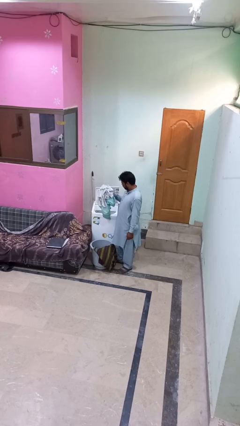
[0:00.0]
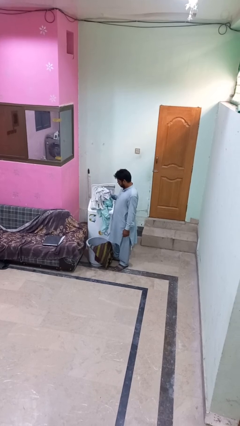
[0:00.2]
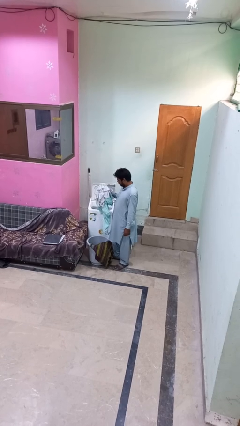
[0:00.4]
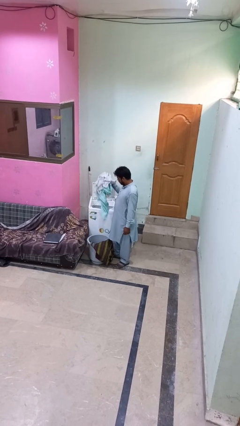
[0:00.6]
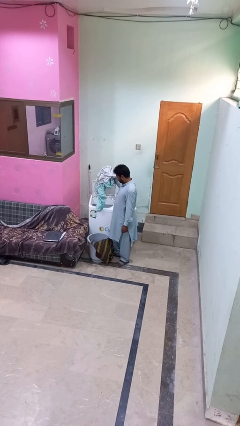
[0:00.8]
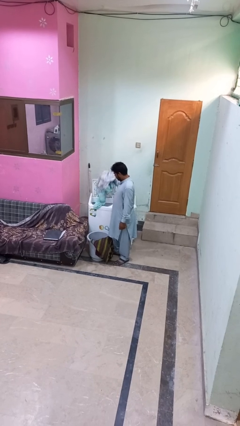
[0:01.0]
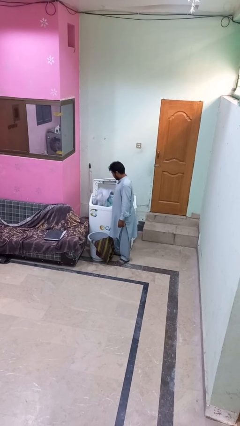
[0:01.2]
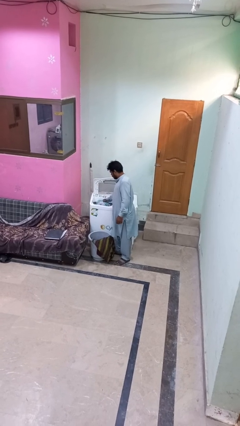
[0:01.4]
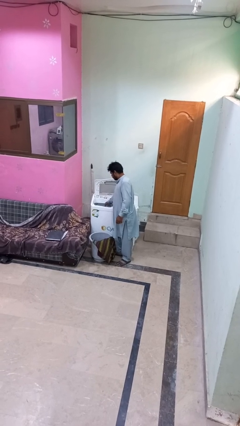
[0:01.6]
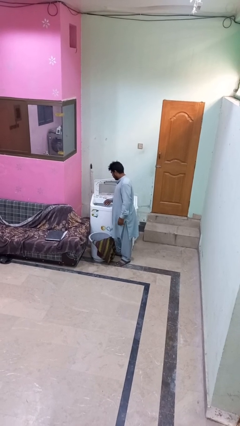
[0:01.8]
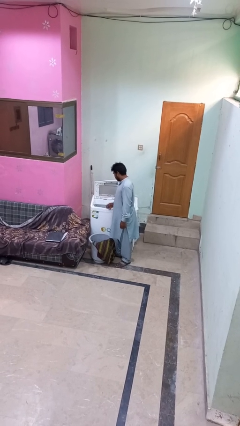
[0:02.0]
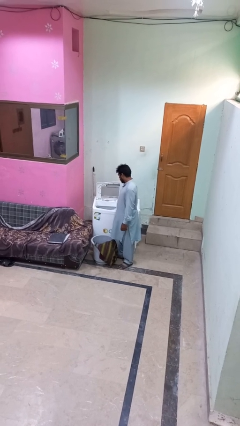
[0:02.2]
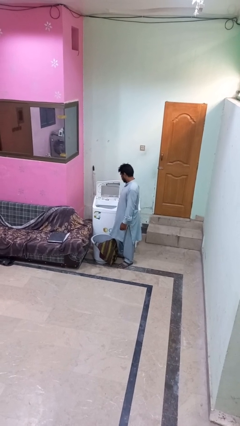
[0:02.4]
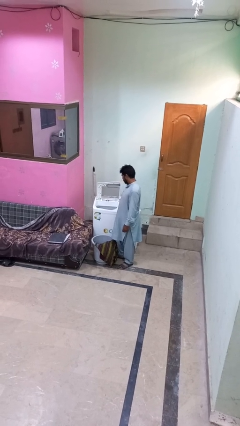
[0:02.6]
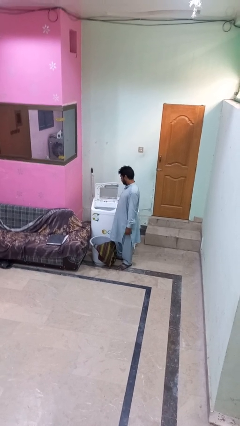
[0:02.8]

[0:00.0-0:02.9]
person loads clotheswasher

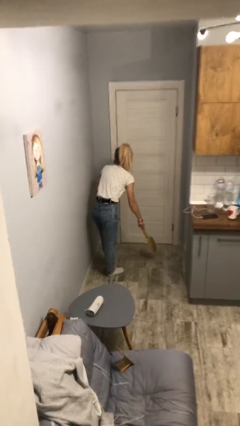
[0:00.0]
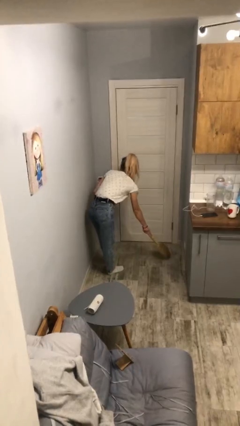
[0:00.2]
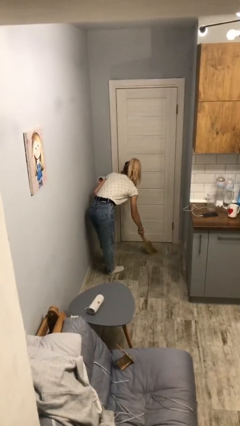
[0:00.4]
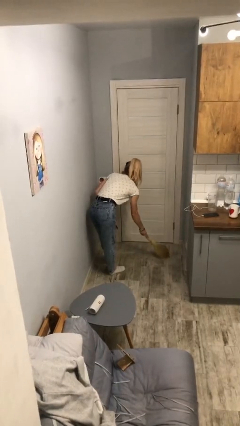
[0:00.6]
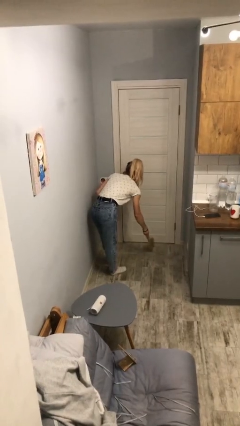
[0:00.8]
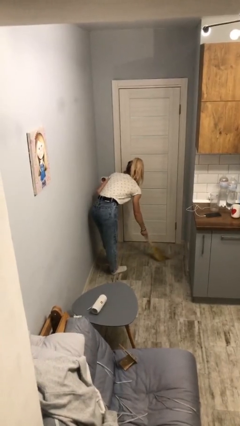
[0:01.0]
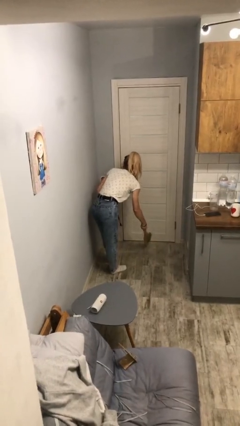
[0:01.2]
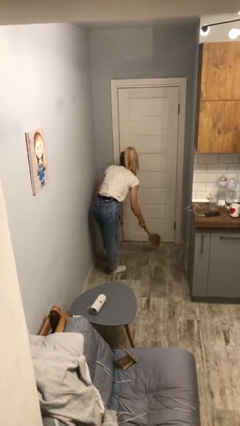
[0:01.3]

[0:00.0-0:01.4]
person sweeps floor

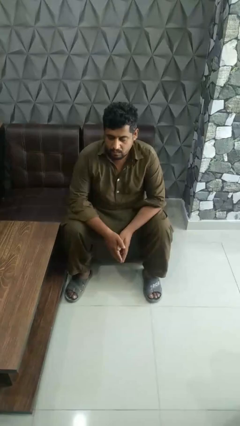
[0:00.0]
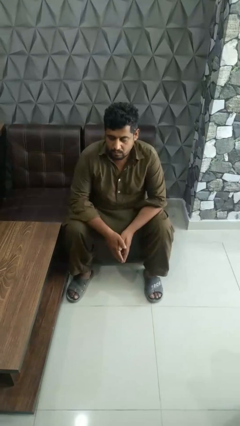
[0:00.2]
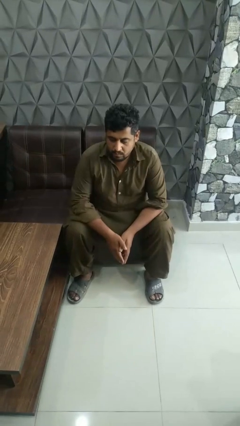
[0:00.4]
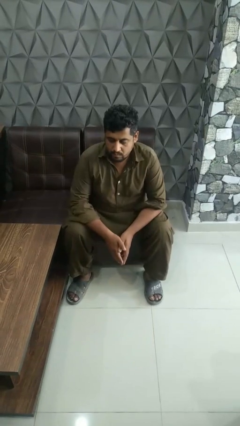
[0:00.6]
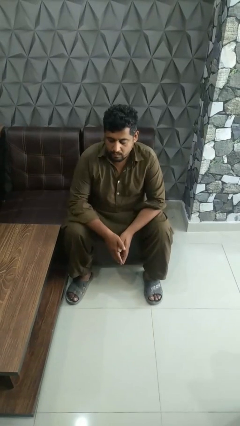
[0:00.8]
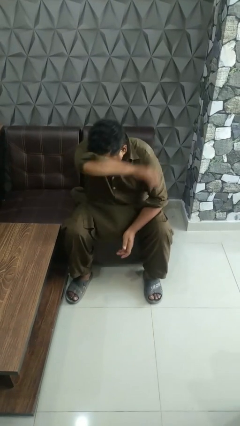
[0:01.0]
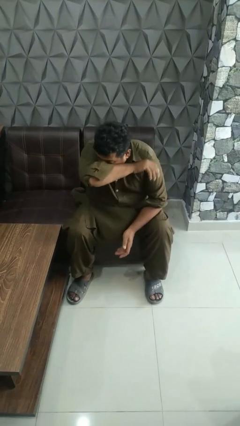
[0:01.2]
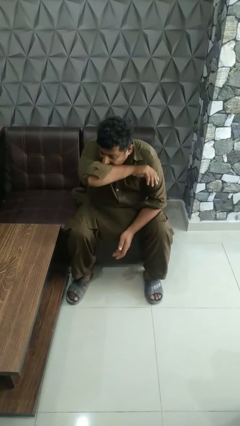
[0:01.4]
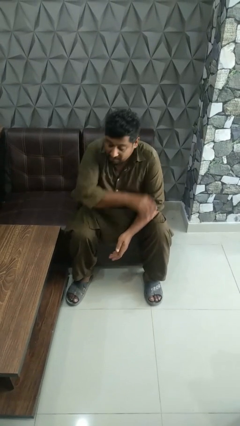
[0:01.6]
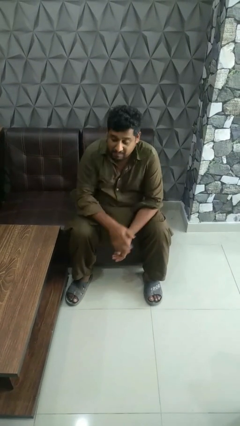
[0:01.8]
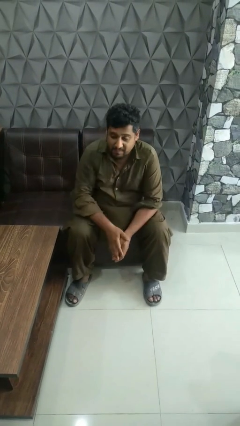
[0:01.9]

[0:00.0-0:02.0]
person sneezes into arm

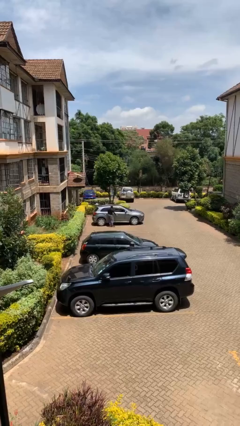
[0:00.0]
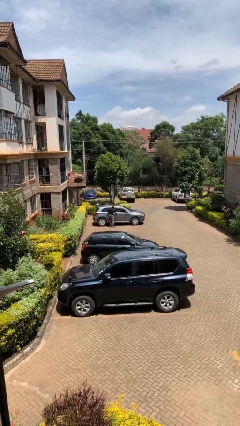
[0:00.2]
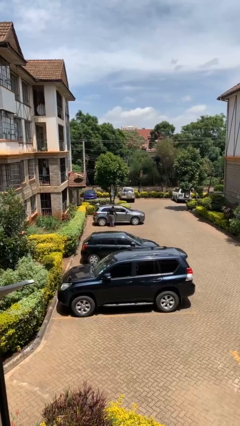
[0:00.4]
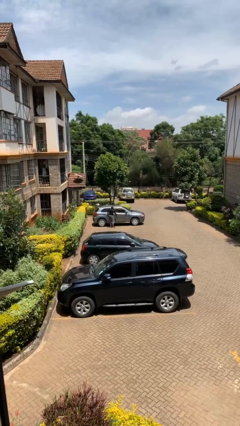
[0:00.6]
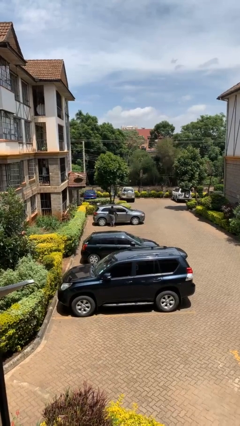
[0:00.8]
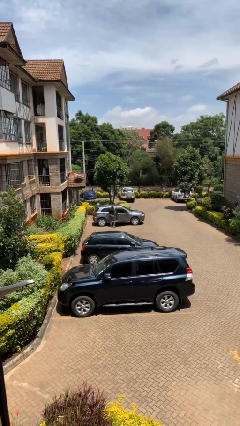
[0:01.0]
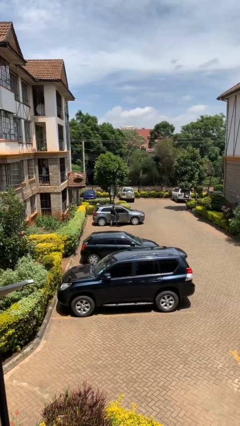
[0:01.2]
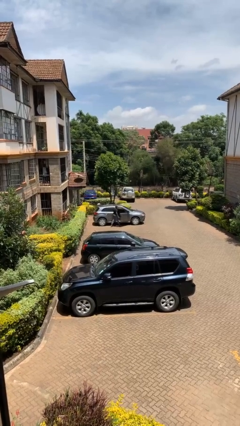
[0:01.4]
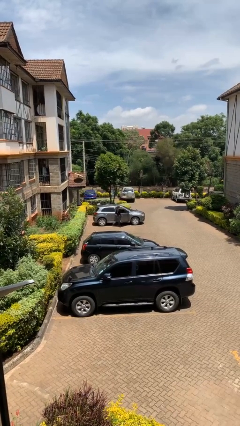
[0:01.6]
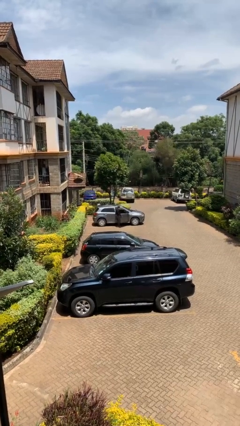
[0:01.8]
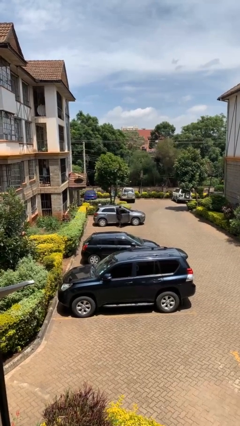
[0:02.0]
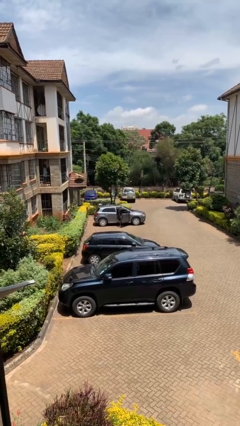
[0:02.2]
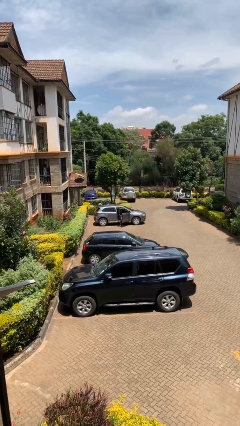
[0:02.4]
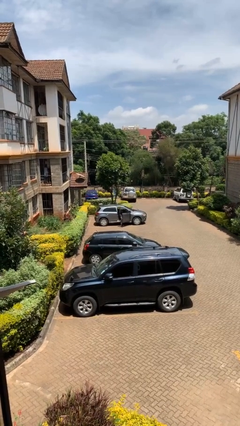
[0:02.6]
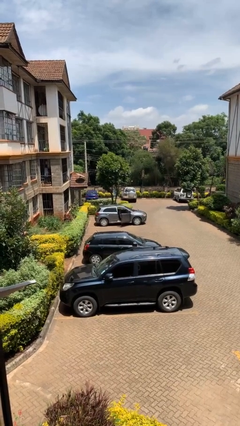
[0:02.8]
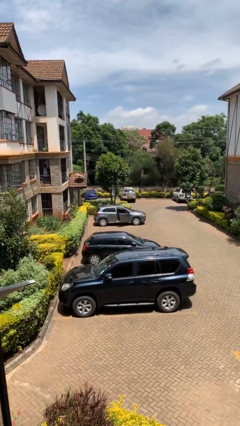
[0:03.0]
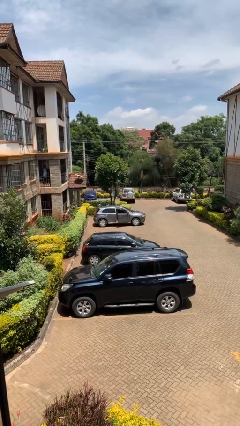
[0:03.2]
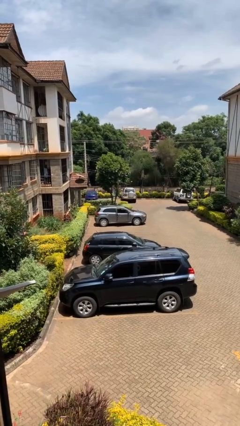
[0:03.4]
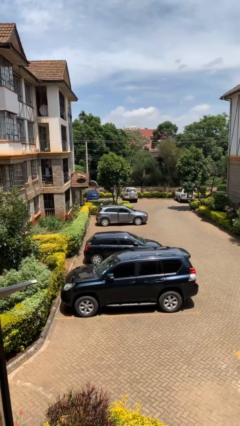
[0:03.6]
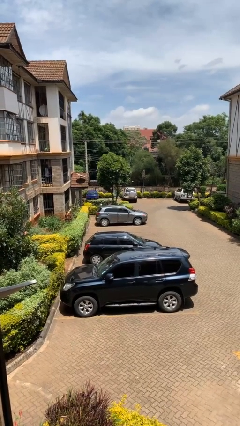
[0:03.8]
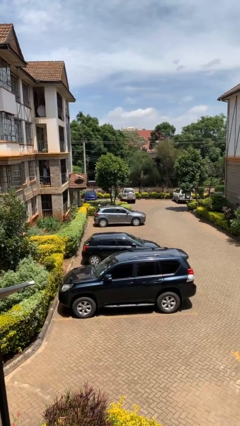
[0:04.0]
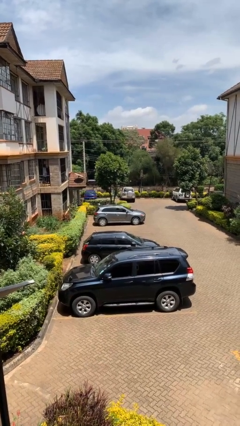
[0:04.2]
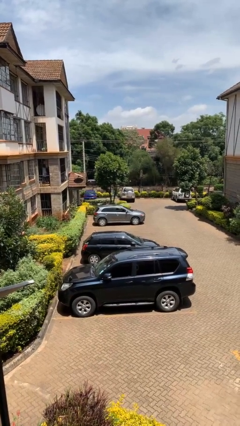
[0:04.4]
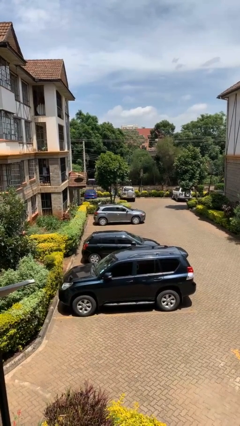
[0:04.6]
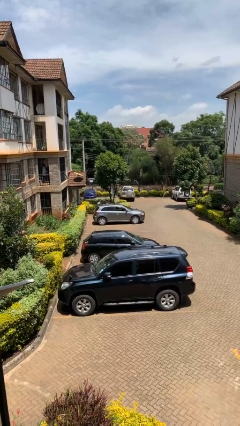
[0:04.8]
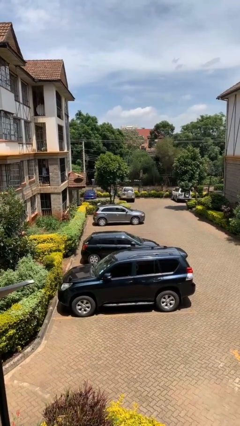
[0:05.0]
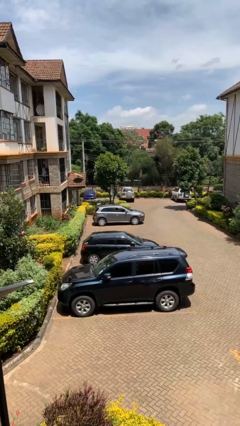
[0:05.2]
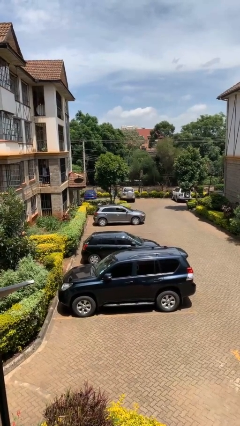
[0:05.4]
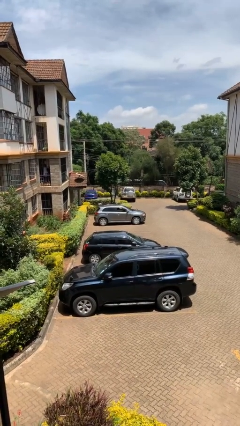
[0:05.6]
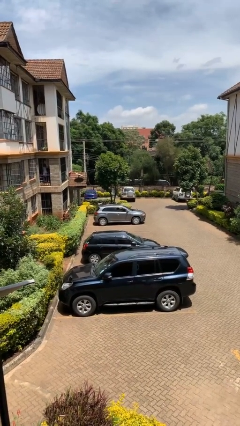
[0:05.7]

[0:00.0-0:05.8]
car picks up person

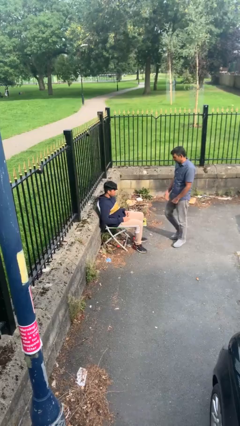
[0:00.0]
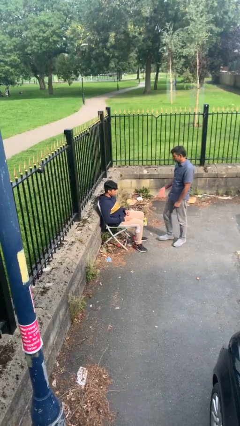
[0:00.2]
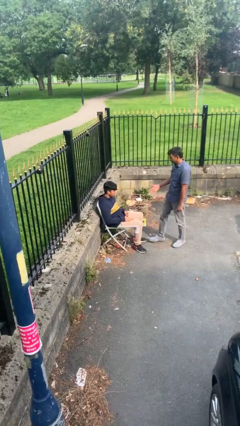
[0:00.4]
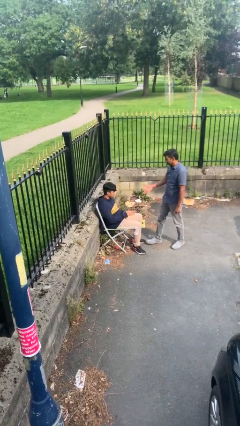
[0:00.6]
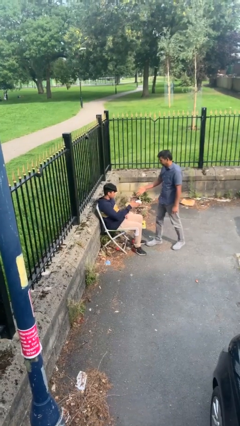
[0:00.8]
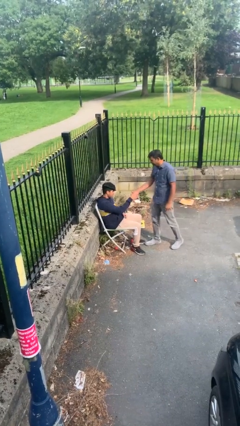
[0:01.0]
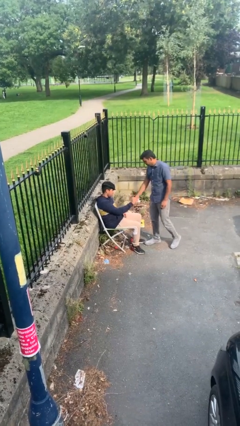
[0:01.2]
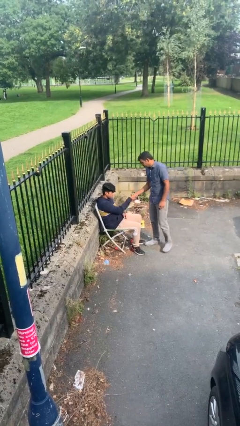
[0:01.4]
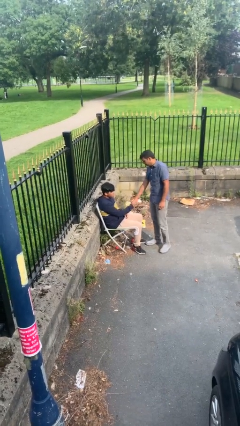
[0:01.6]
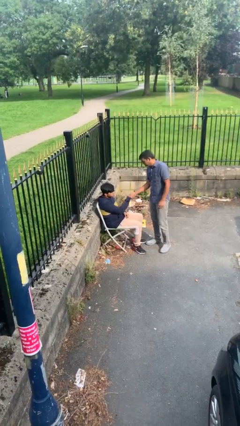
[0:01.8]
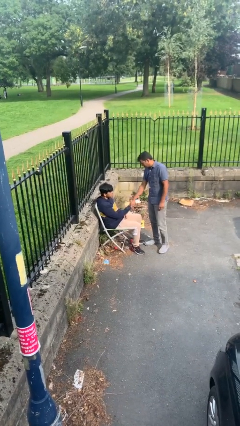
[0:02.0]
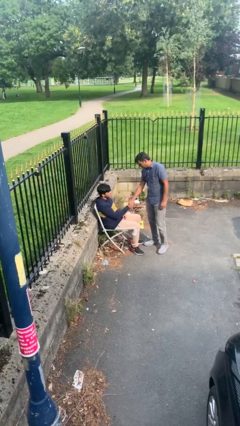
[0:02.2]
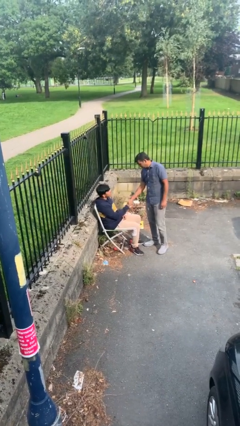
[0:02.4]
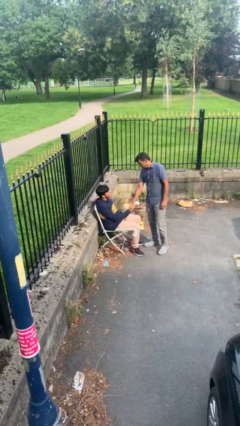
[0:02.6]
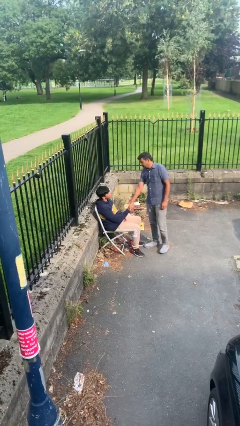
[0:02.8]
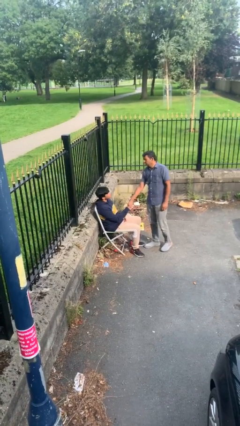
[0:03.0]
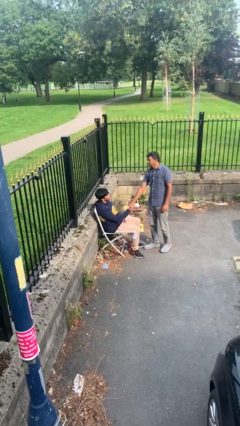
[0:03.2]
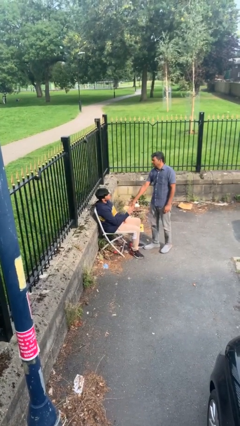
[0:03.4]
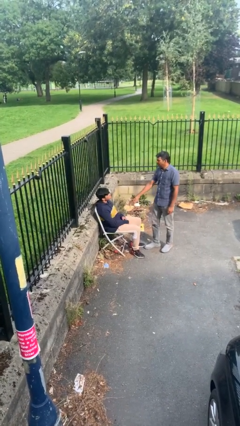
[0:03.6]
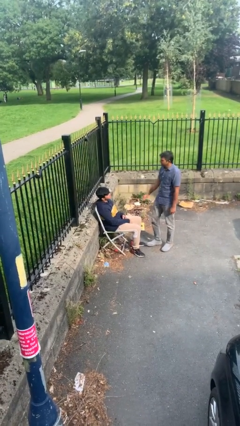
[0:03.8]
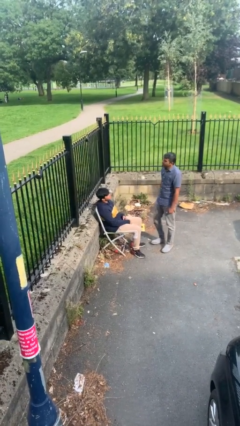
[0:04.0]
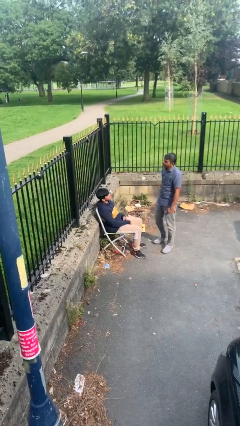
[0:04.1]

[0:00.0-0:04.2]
person shakes hand

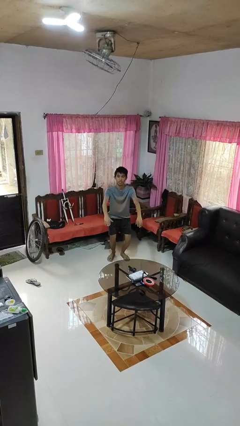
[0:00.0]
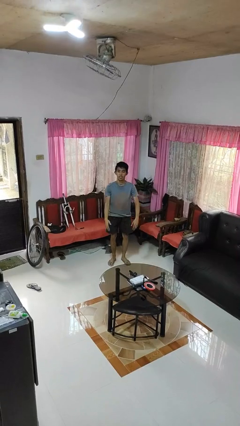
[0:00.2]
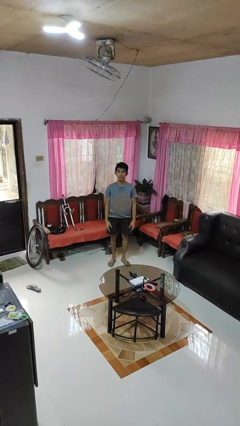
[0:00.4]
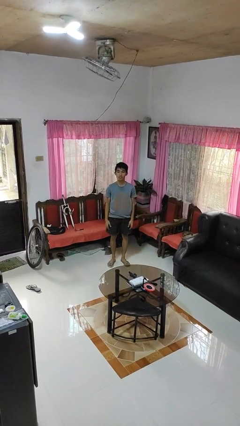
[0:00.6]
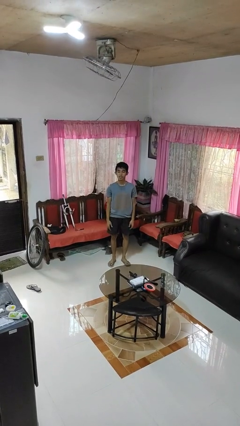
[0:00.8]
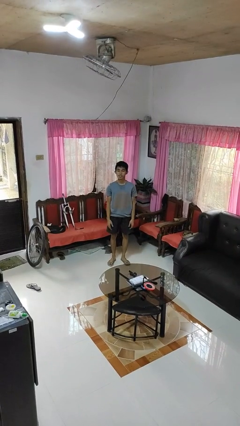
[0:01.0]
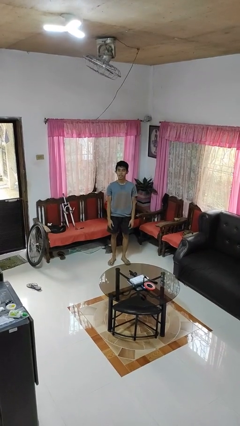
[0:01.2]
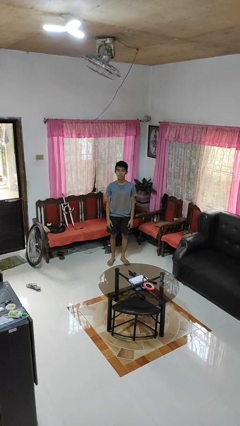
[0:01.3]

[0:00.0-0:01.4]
person stands up
